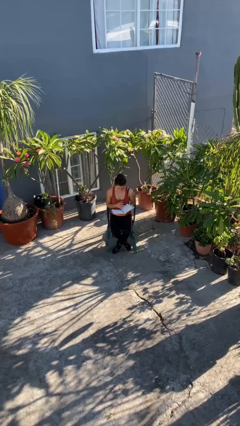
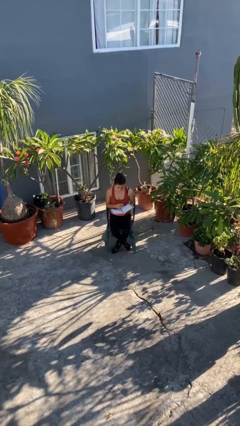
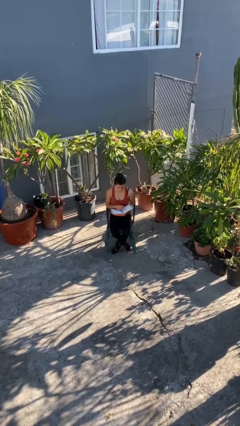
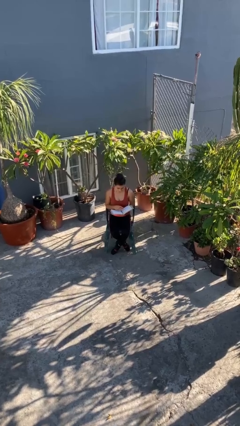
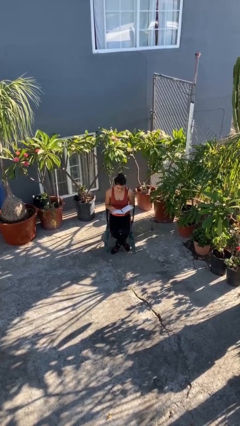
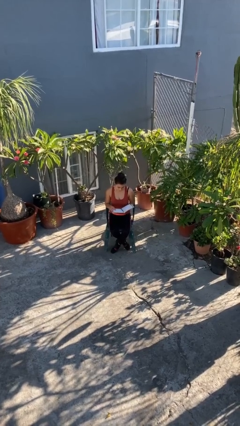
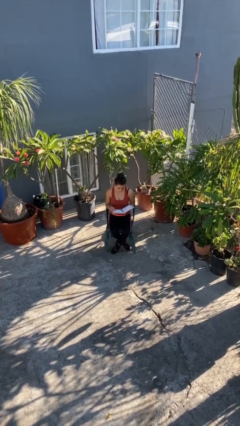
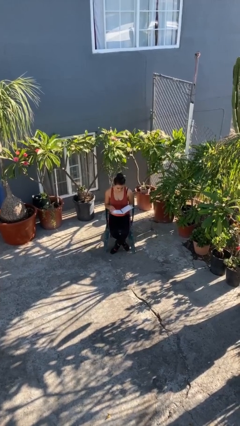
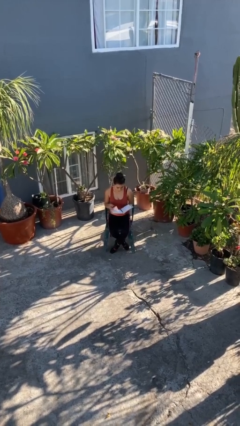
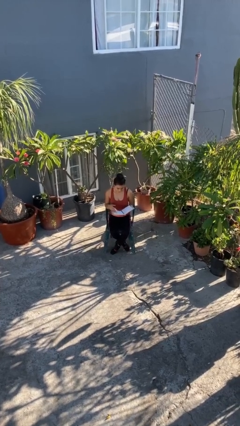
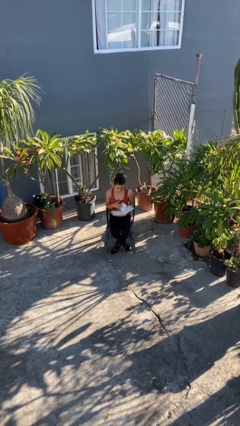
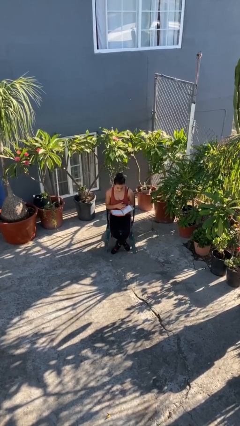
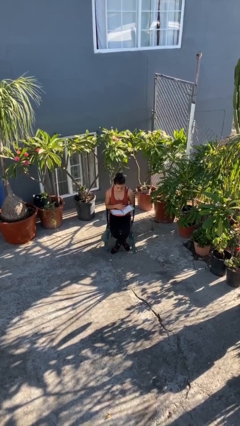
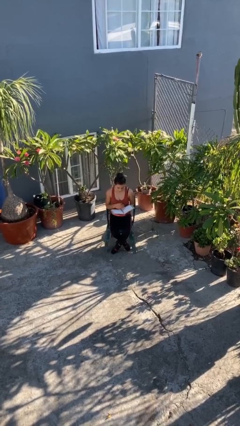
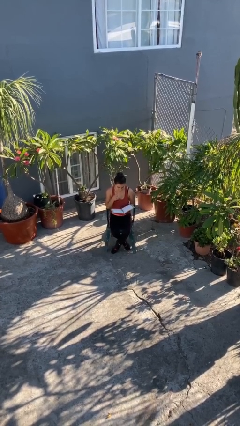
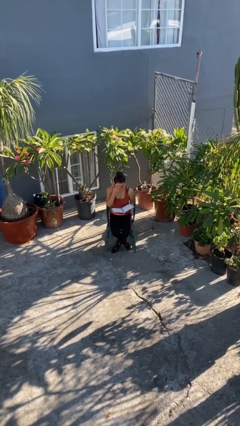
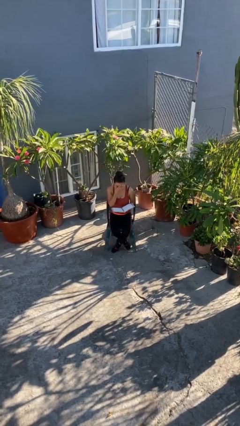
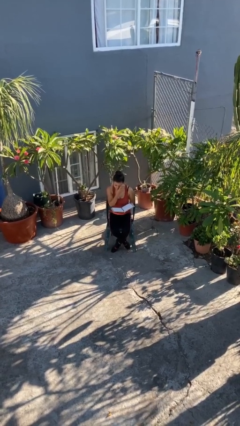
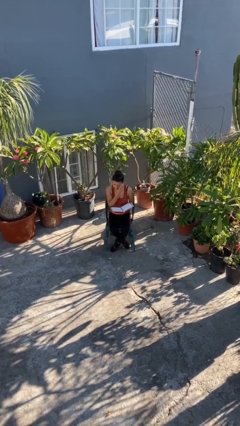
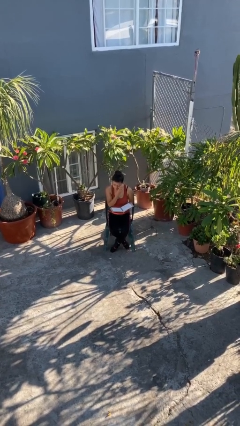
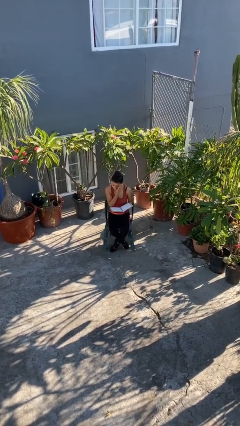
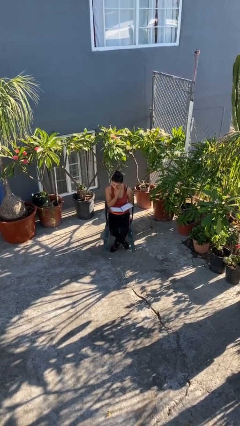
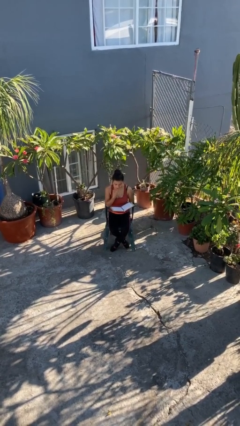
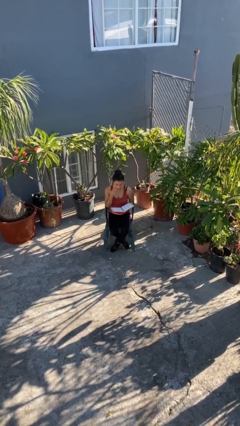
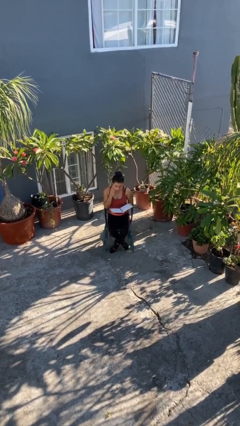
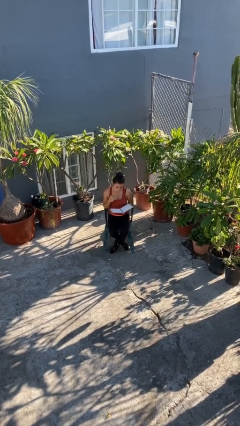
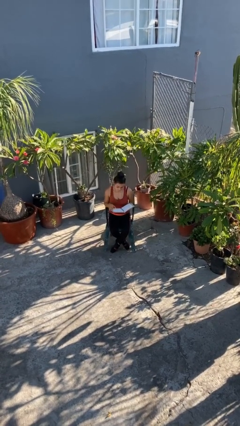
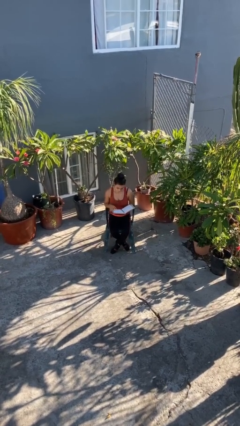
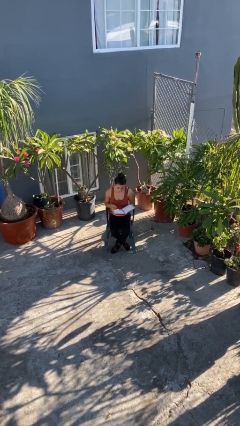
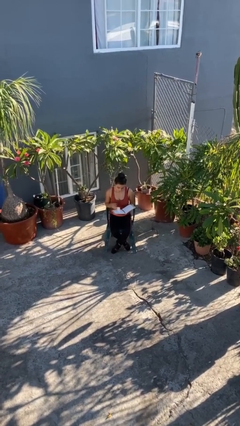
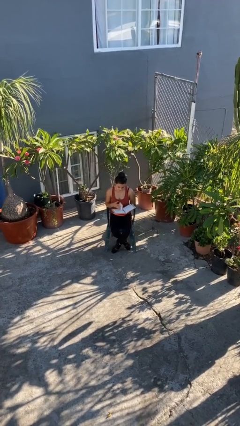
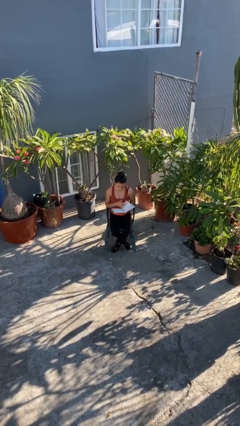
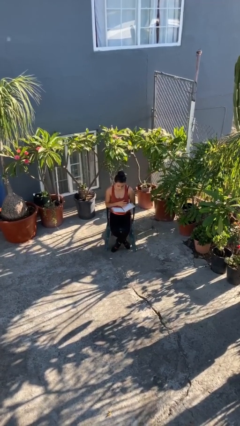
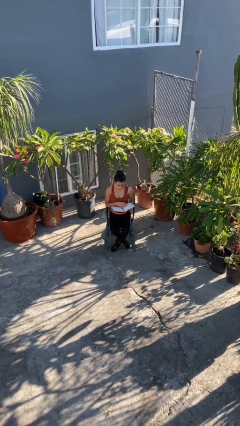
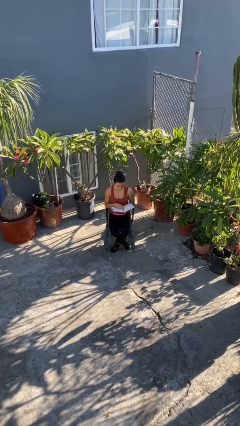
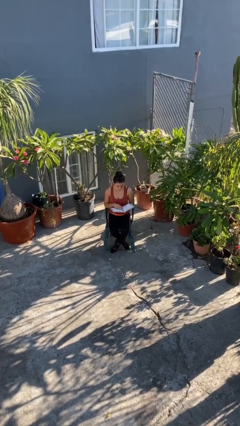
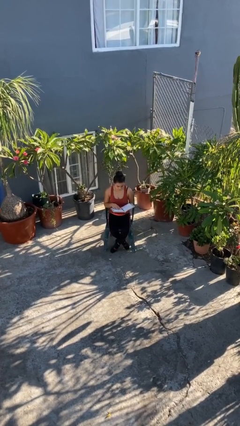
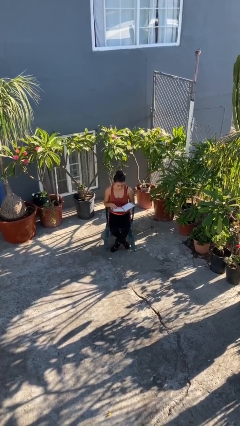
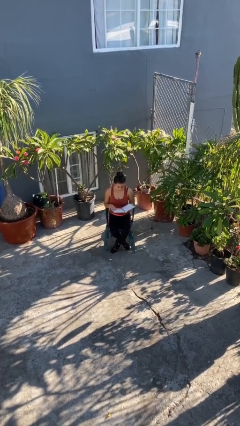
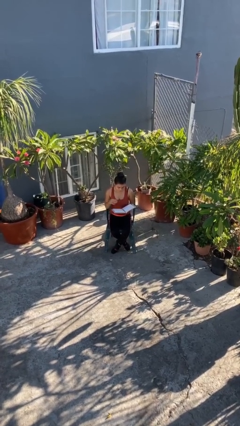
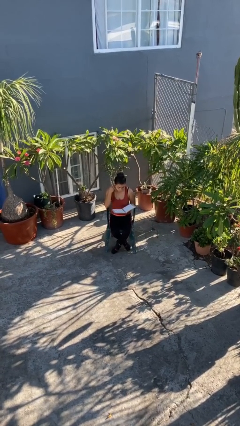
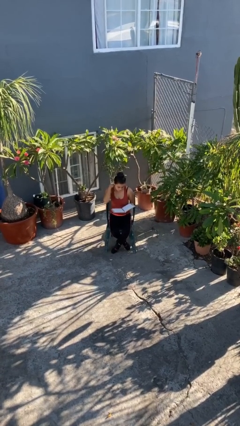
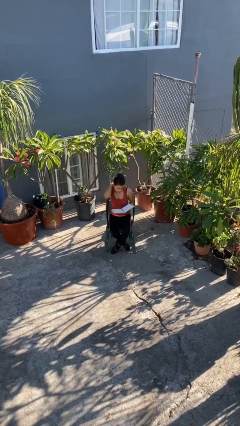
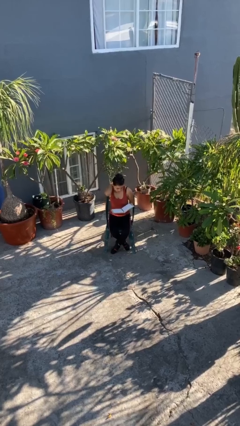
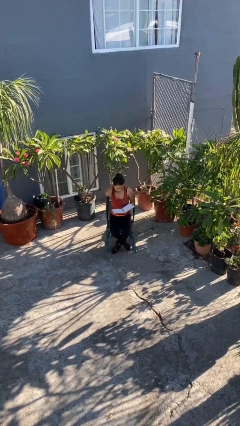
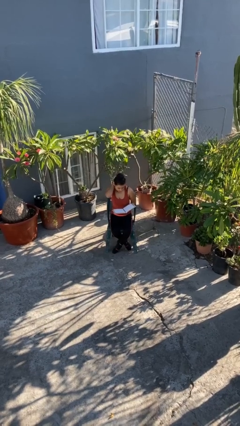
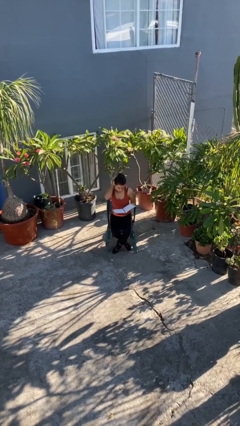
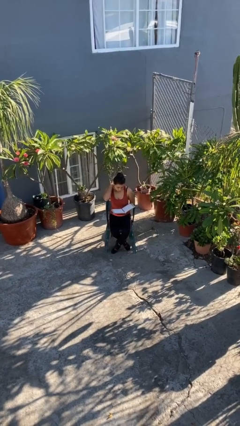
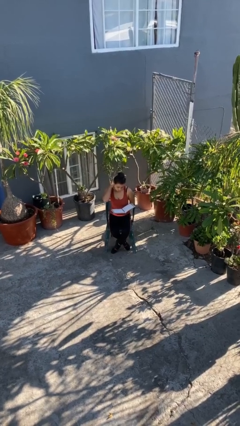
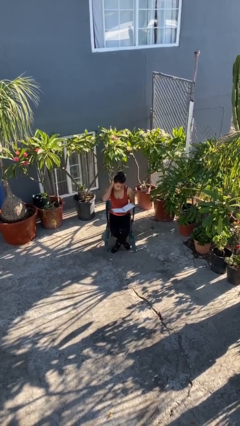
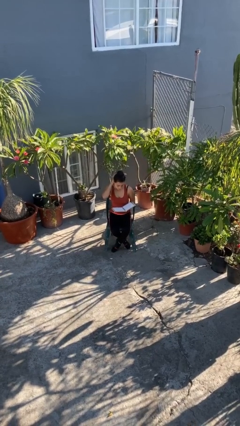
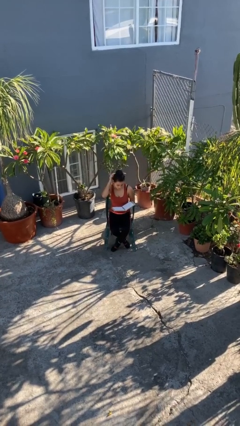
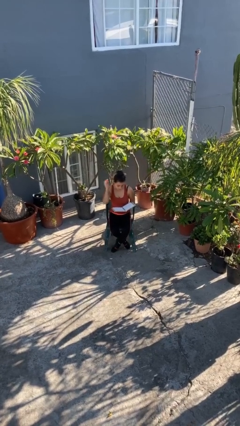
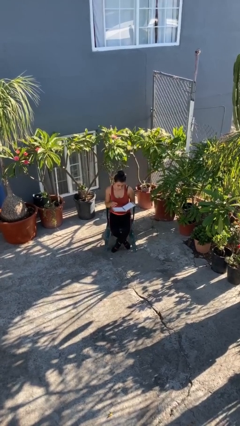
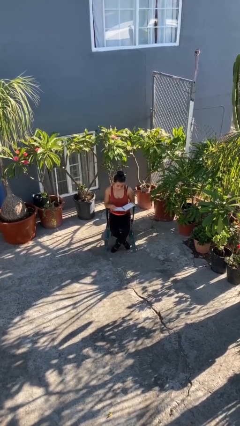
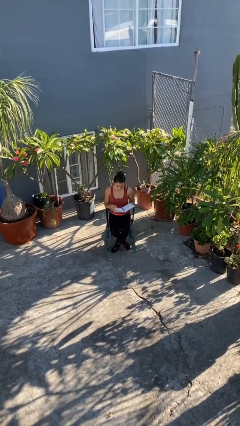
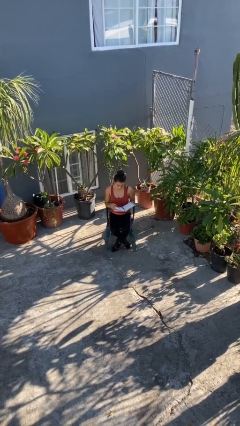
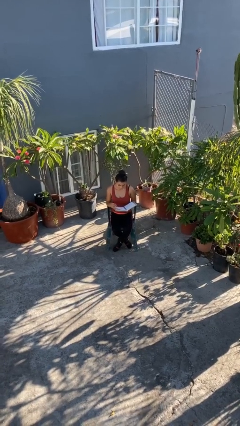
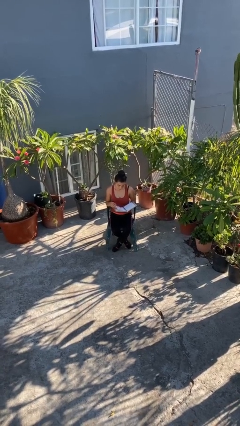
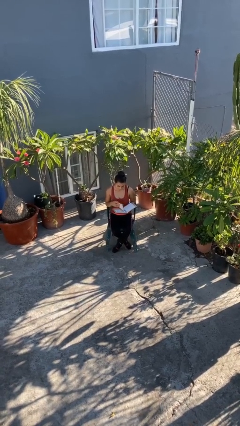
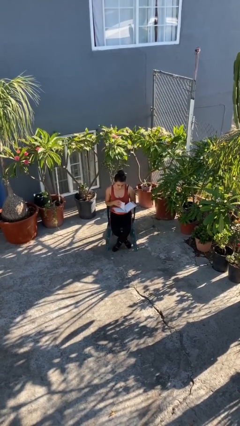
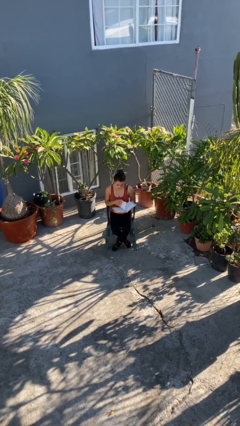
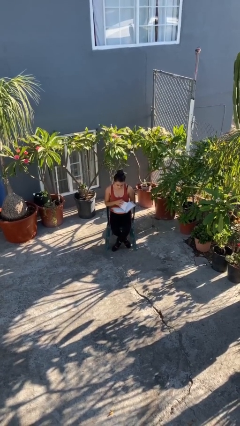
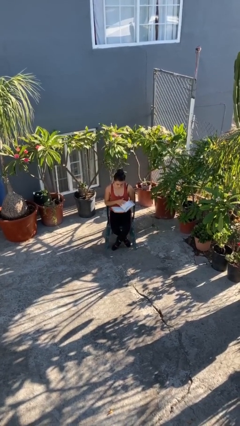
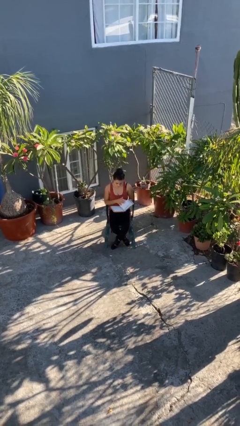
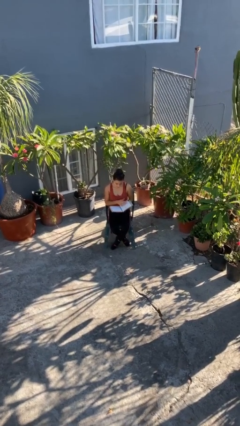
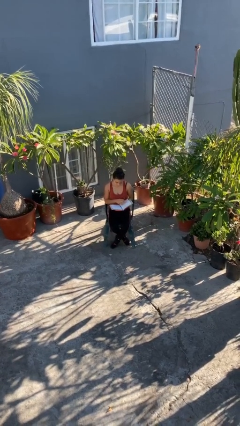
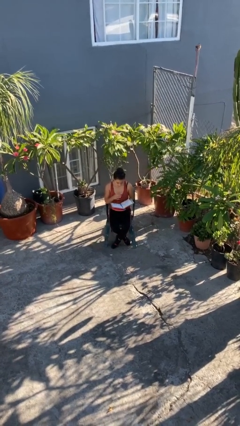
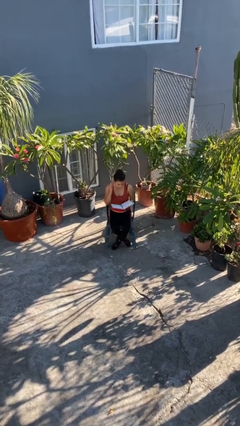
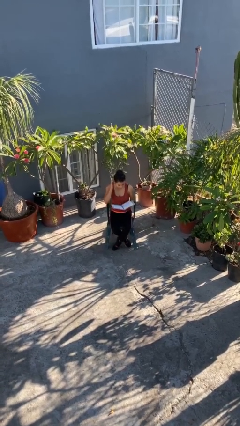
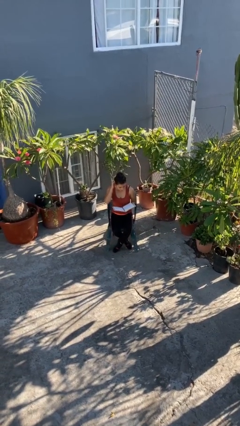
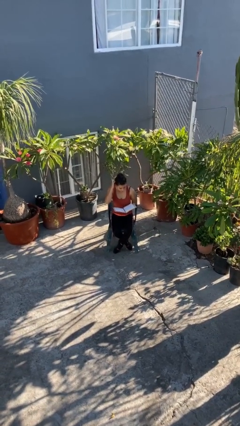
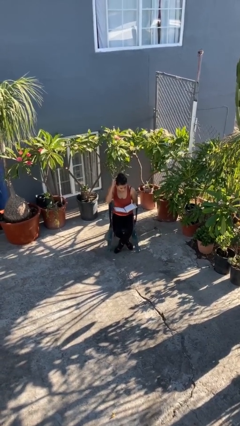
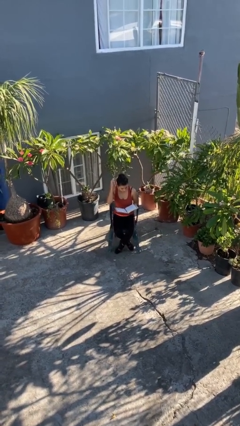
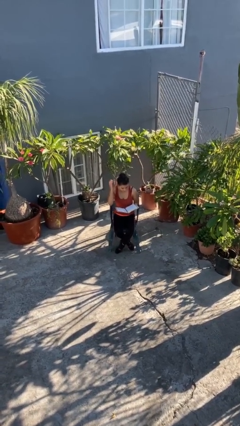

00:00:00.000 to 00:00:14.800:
person reads document

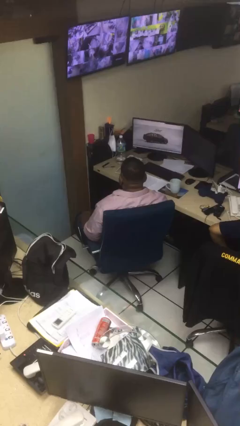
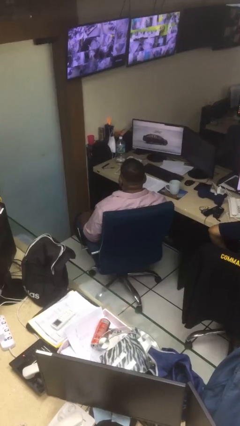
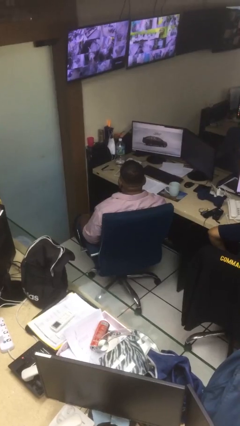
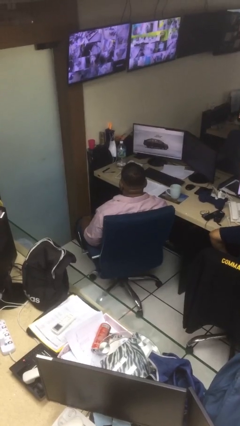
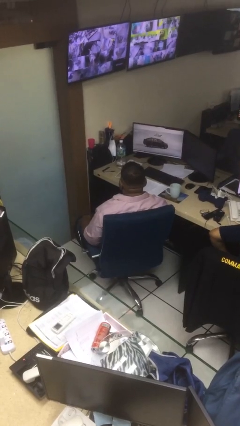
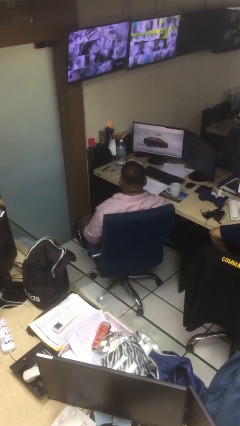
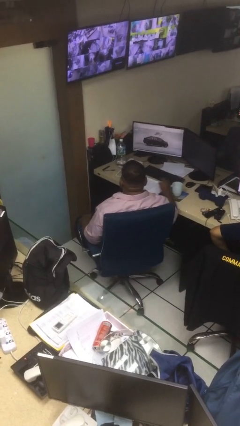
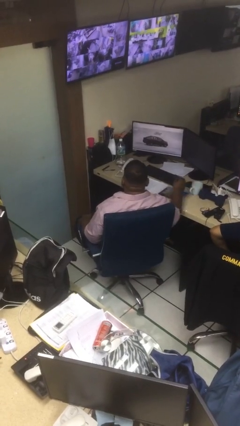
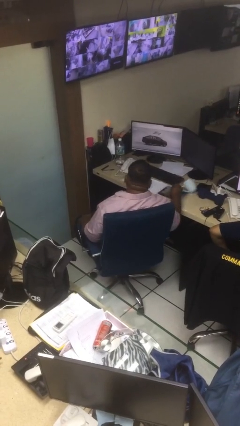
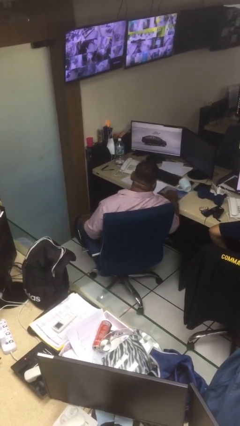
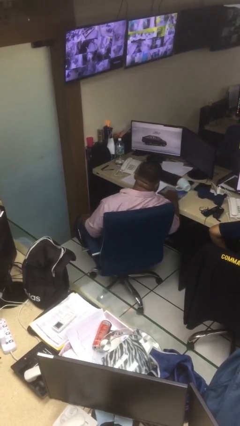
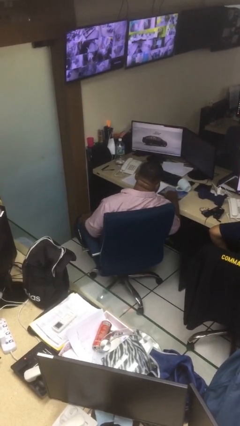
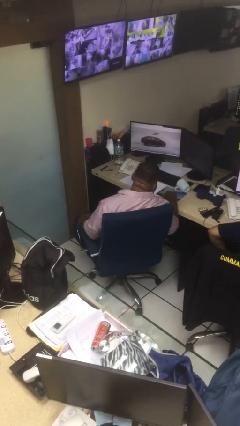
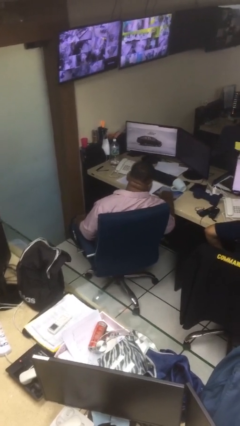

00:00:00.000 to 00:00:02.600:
person knocks over glass

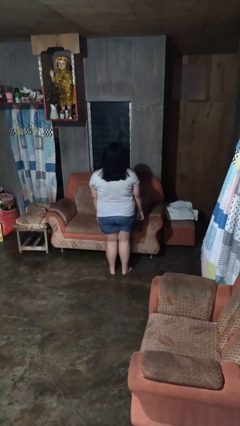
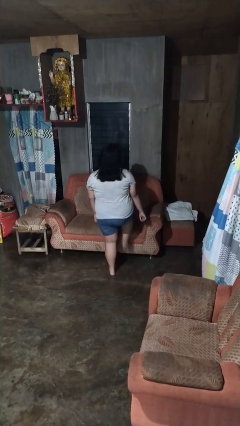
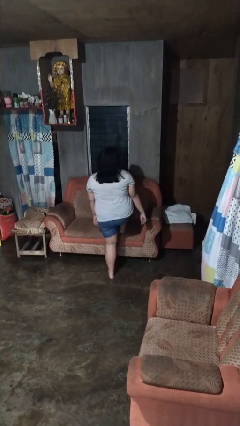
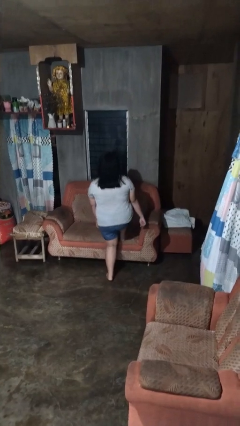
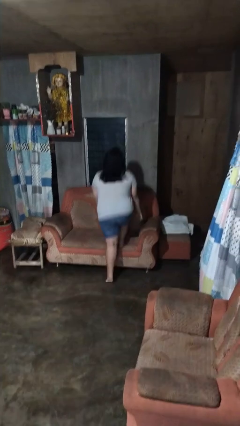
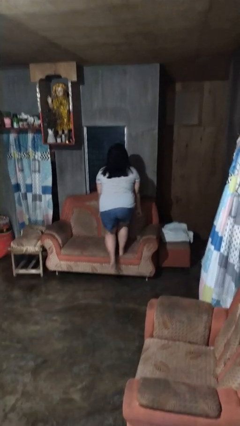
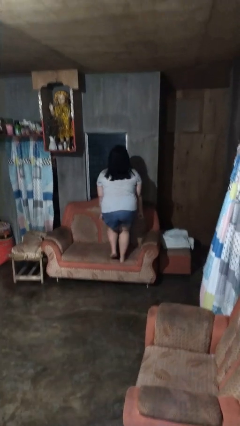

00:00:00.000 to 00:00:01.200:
person climbs on couch
